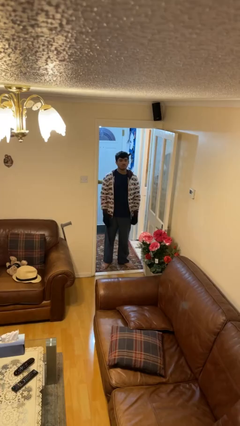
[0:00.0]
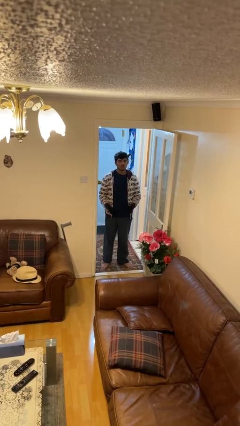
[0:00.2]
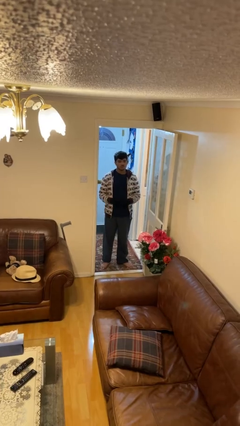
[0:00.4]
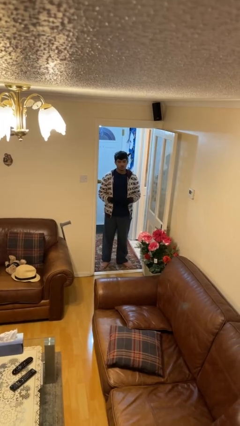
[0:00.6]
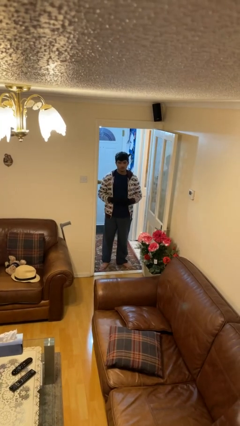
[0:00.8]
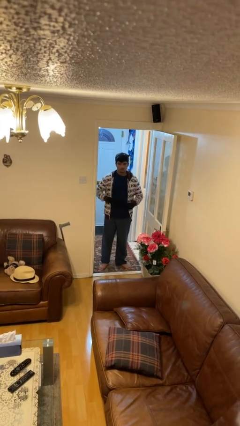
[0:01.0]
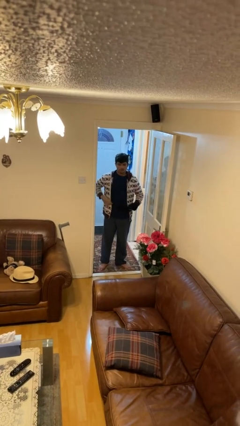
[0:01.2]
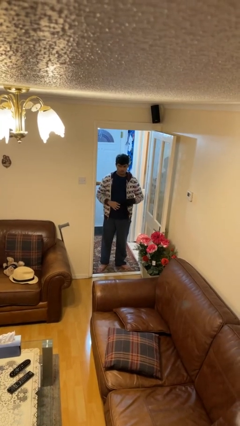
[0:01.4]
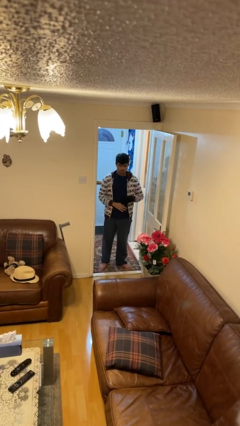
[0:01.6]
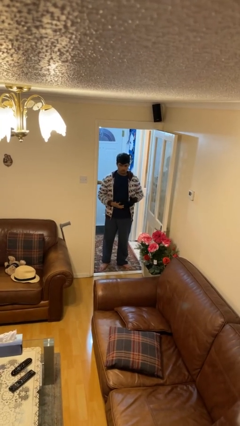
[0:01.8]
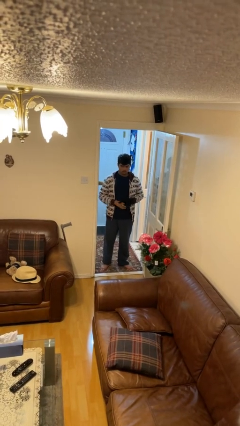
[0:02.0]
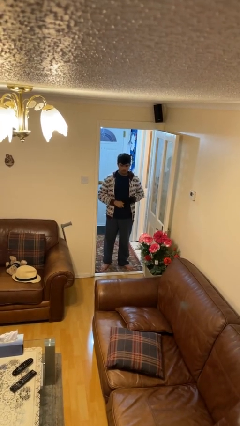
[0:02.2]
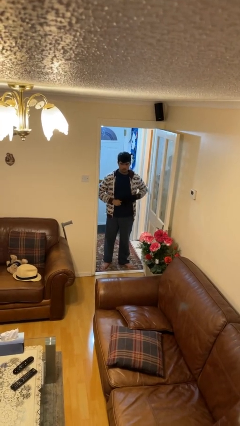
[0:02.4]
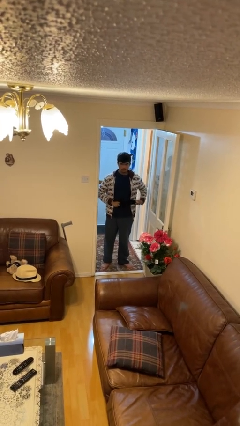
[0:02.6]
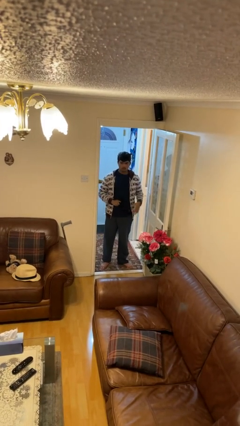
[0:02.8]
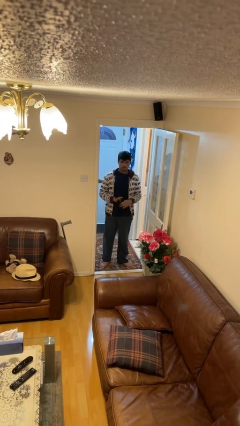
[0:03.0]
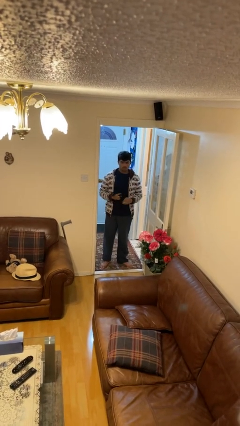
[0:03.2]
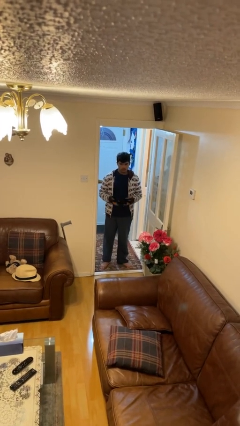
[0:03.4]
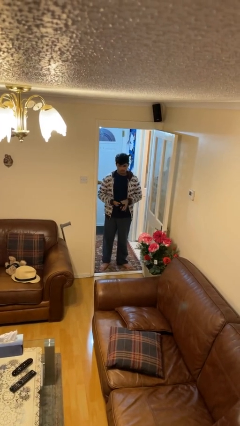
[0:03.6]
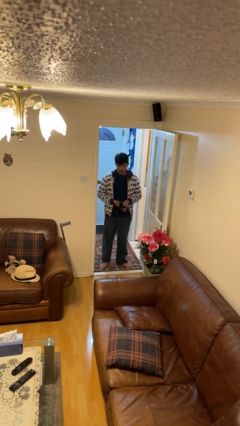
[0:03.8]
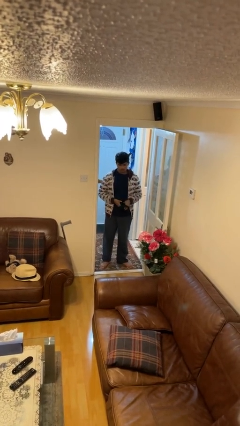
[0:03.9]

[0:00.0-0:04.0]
person takes off gloves

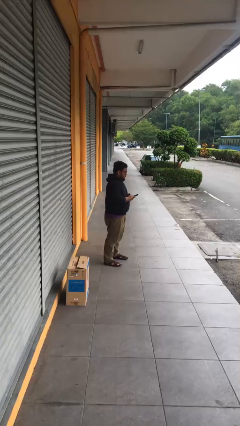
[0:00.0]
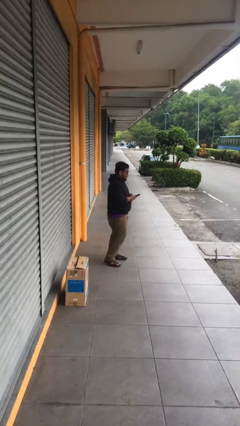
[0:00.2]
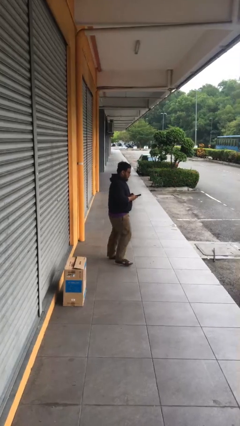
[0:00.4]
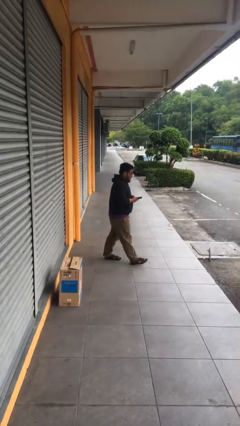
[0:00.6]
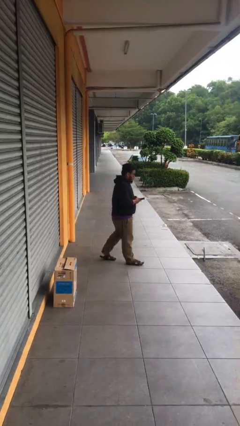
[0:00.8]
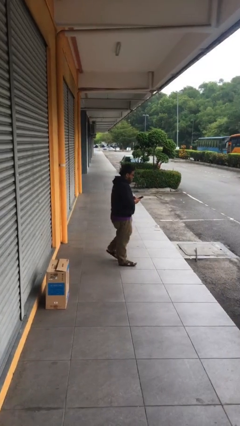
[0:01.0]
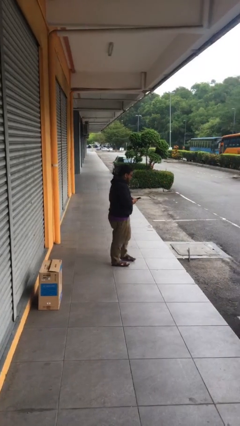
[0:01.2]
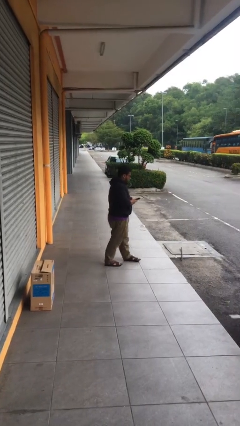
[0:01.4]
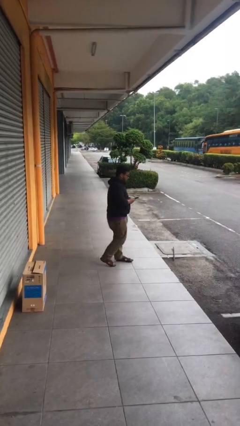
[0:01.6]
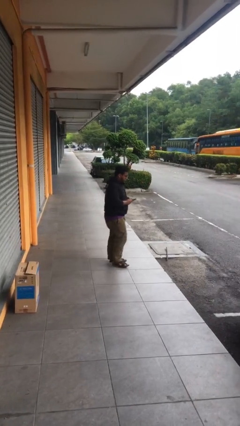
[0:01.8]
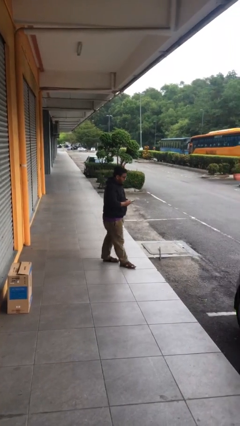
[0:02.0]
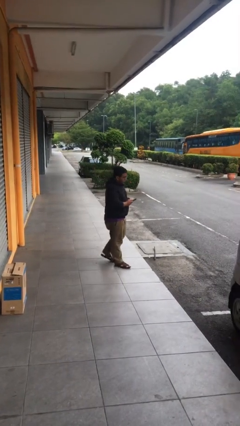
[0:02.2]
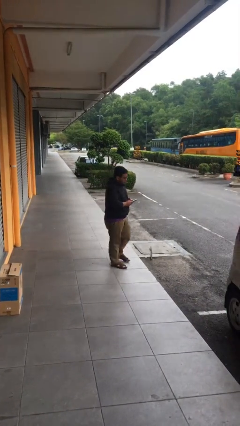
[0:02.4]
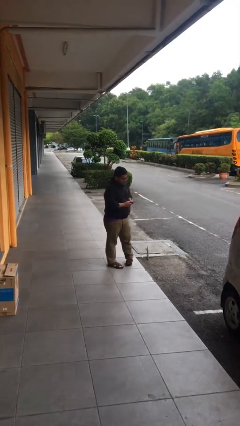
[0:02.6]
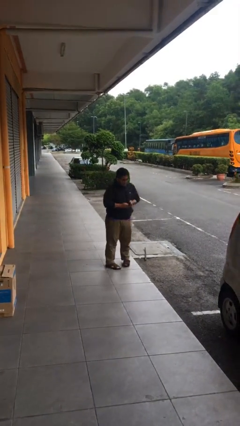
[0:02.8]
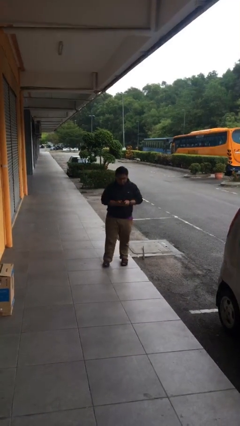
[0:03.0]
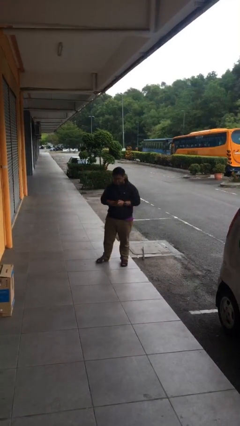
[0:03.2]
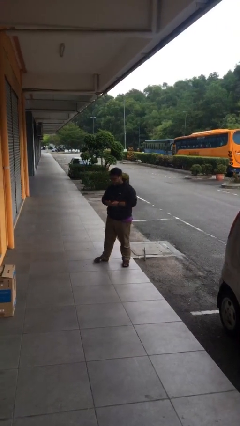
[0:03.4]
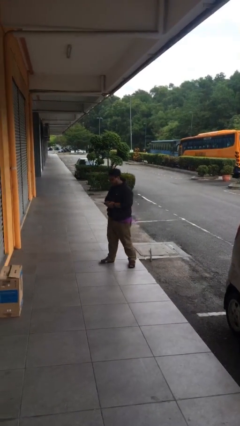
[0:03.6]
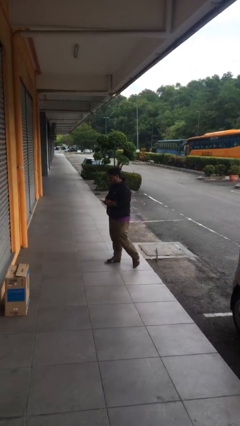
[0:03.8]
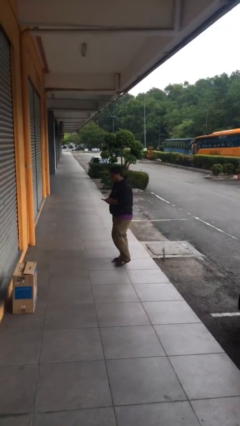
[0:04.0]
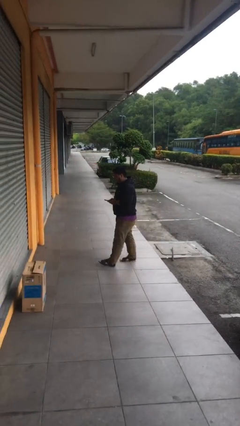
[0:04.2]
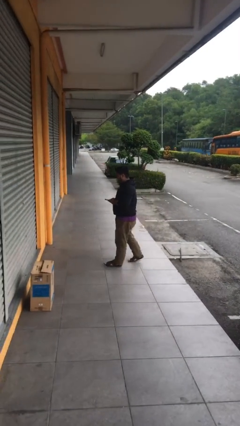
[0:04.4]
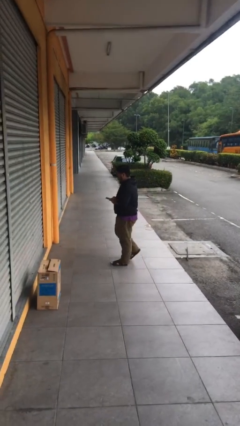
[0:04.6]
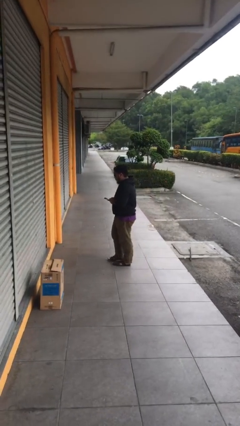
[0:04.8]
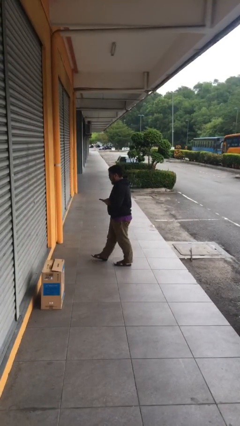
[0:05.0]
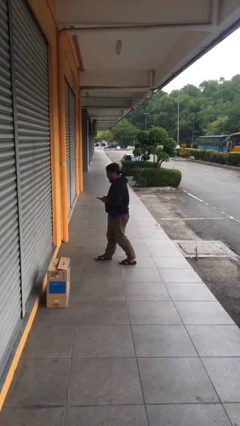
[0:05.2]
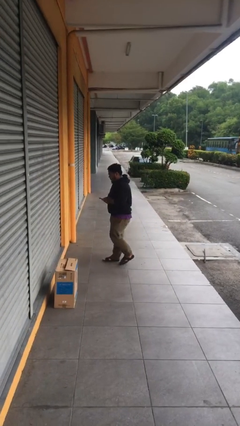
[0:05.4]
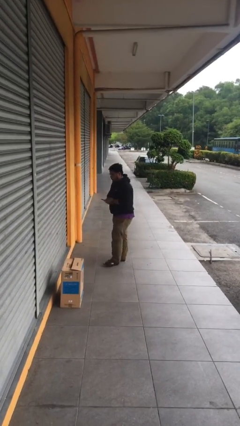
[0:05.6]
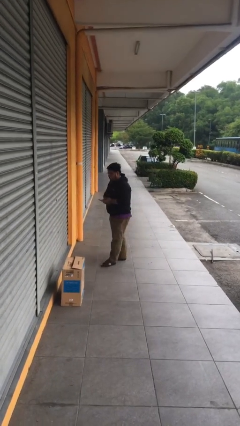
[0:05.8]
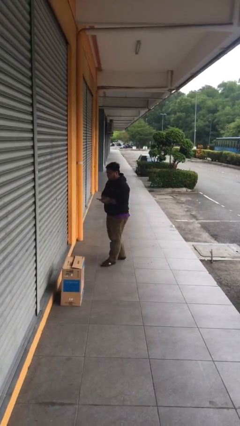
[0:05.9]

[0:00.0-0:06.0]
person texts on phone

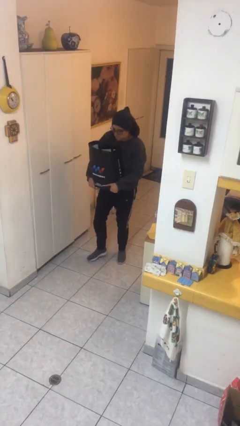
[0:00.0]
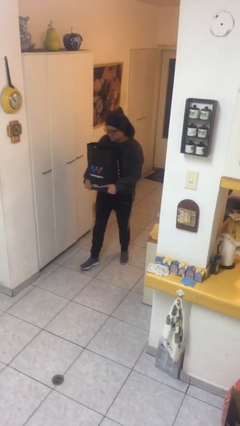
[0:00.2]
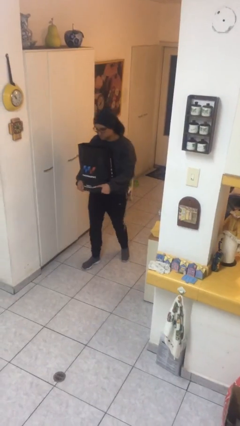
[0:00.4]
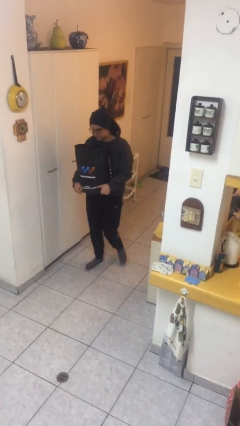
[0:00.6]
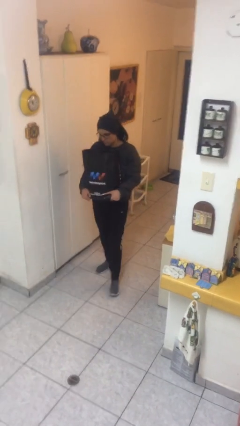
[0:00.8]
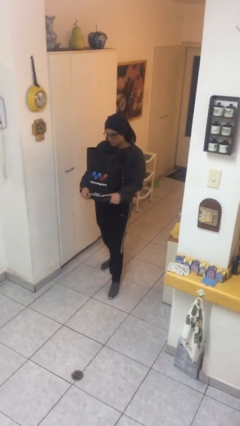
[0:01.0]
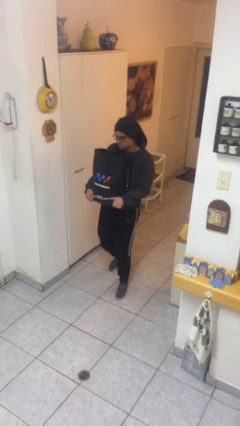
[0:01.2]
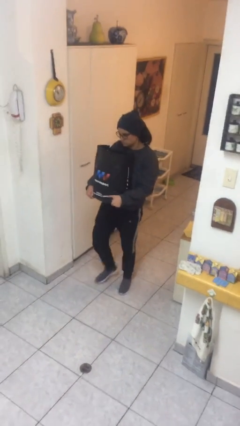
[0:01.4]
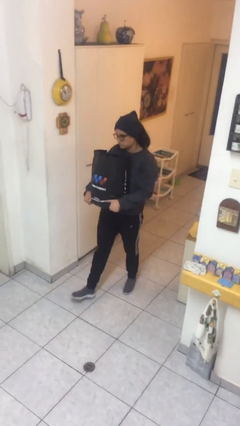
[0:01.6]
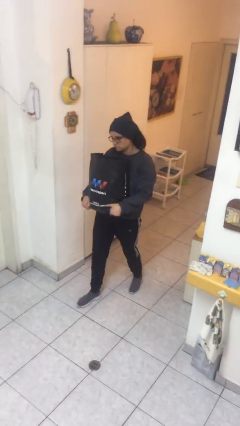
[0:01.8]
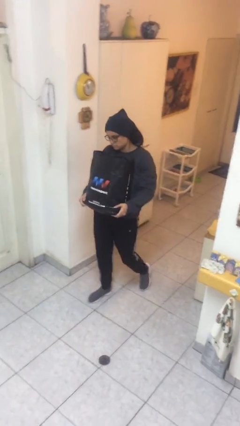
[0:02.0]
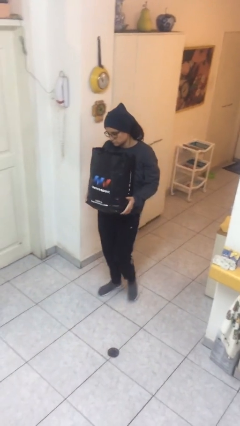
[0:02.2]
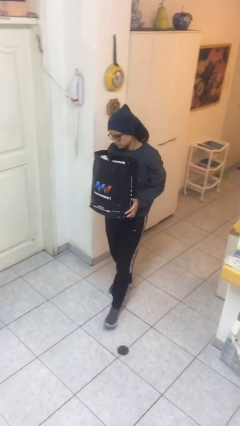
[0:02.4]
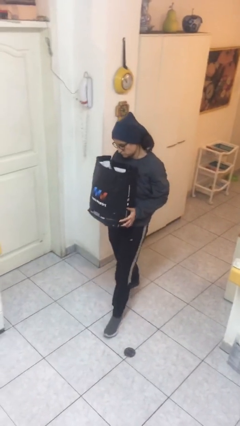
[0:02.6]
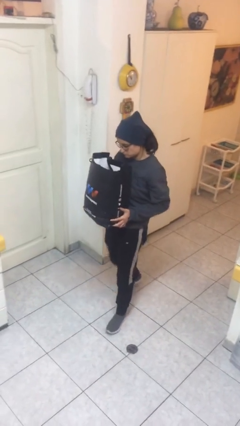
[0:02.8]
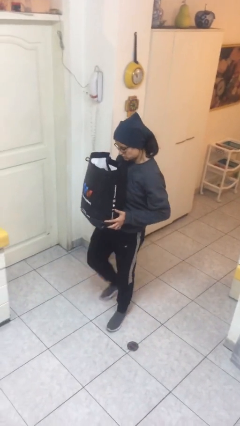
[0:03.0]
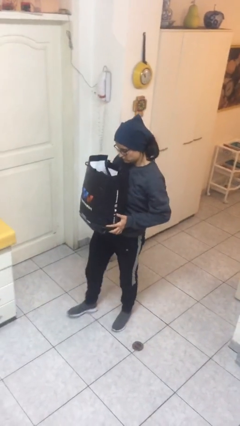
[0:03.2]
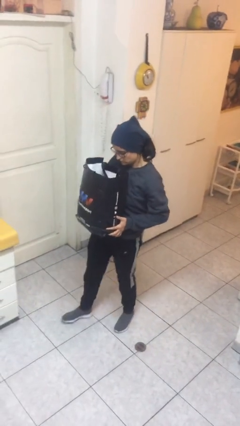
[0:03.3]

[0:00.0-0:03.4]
person carries heavy object

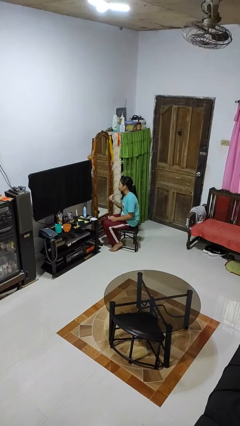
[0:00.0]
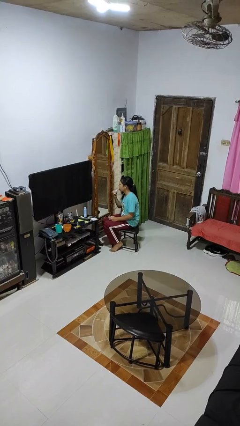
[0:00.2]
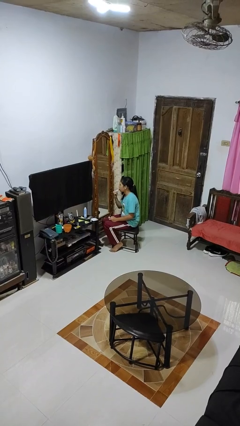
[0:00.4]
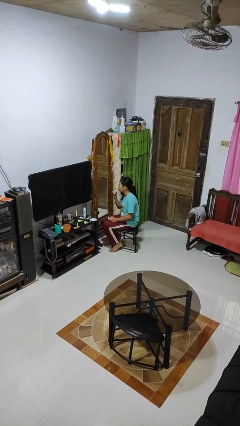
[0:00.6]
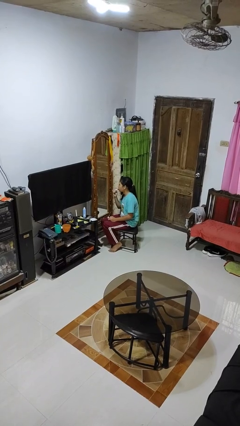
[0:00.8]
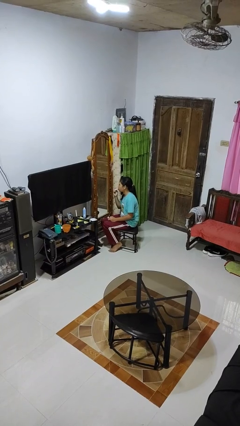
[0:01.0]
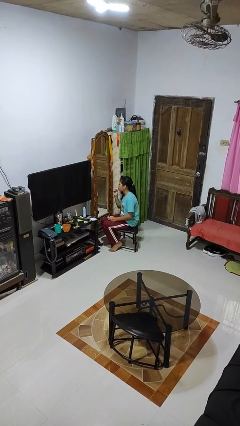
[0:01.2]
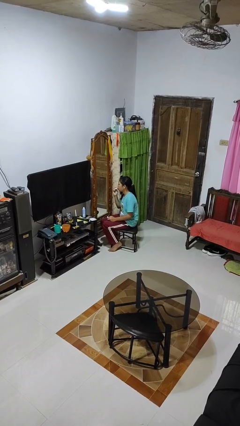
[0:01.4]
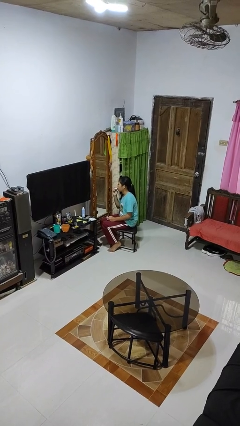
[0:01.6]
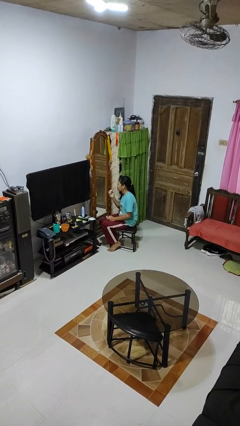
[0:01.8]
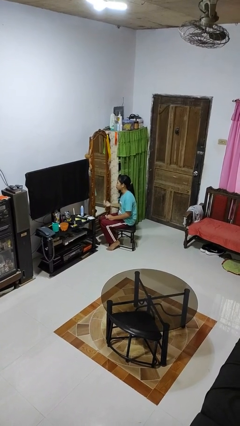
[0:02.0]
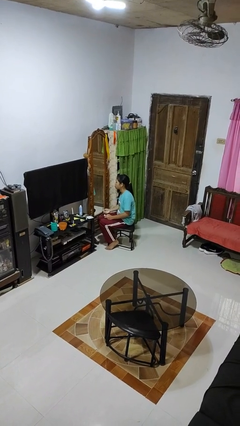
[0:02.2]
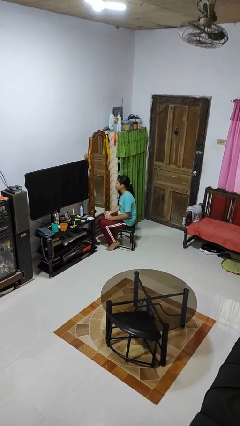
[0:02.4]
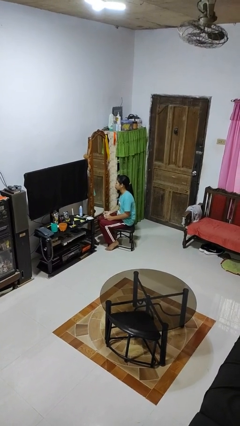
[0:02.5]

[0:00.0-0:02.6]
person applies lip makeup

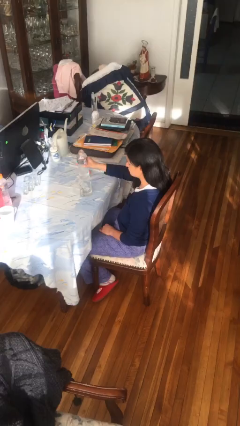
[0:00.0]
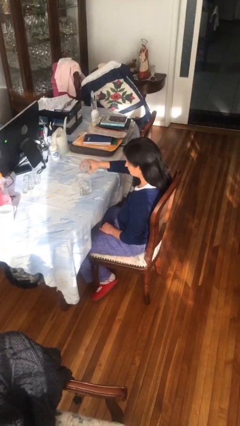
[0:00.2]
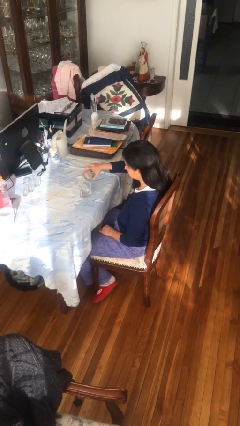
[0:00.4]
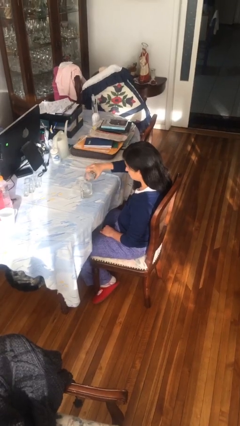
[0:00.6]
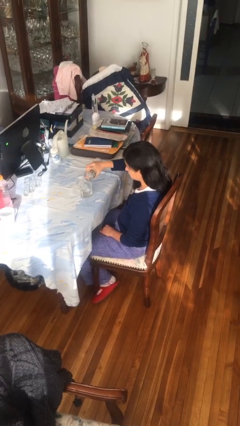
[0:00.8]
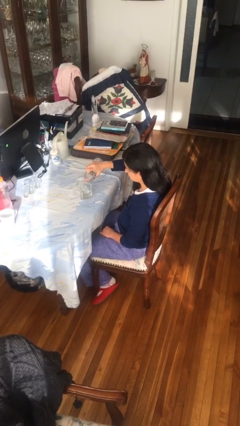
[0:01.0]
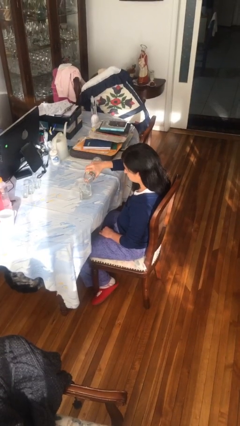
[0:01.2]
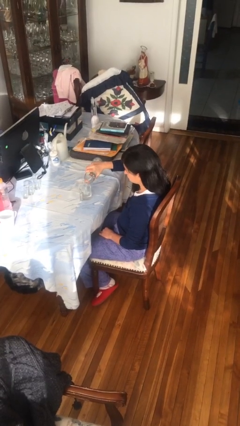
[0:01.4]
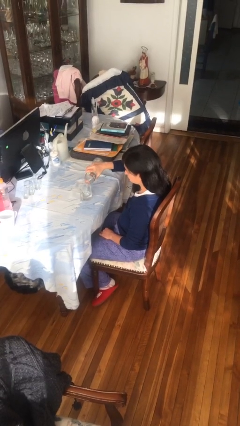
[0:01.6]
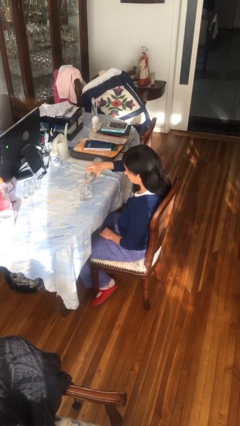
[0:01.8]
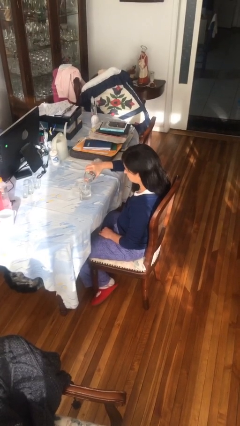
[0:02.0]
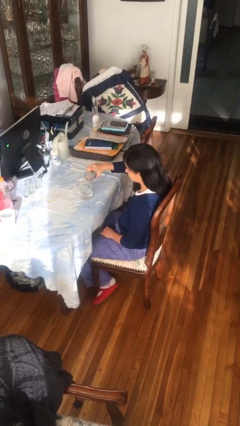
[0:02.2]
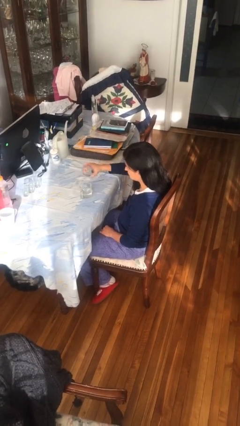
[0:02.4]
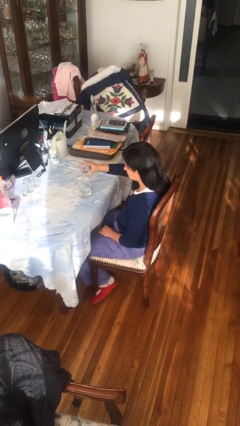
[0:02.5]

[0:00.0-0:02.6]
person pours liquid into cup
